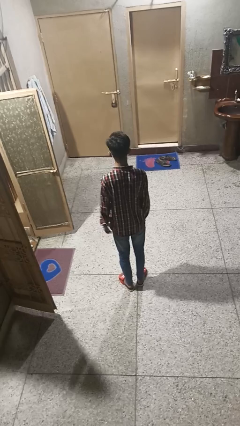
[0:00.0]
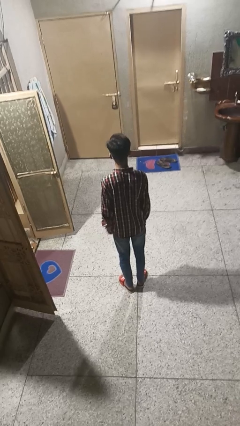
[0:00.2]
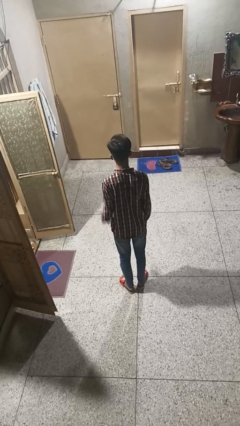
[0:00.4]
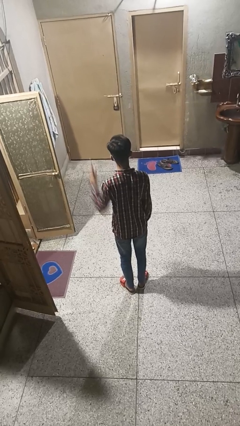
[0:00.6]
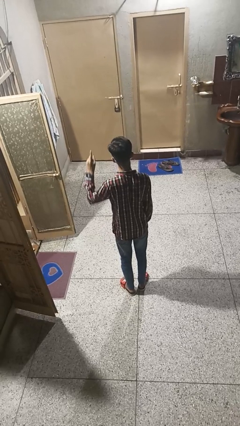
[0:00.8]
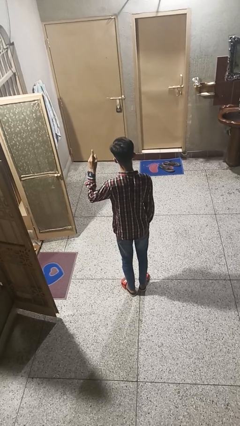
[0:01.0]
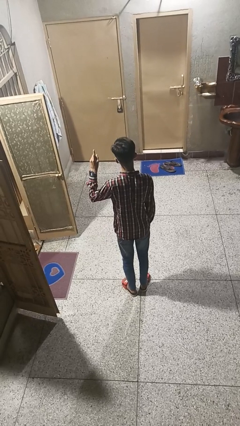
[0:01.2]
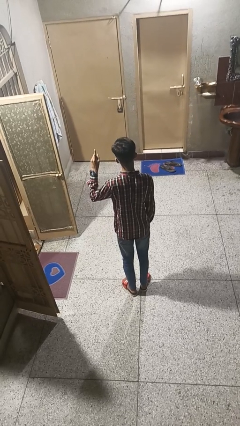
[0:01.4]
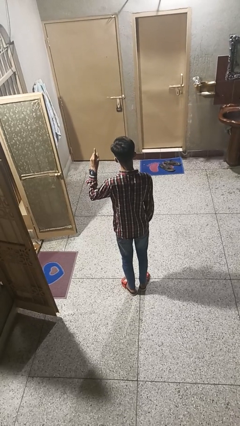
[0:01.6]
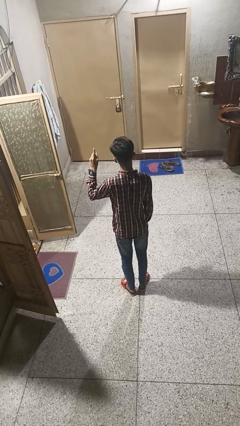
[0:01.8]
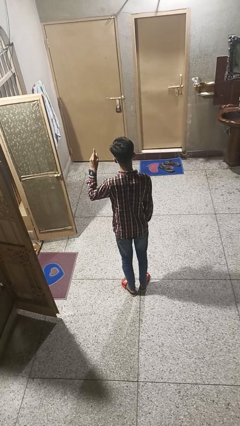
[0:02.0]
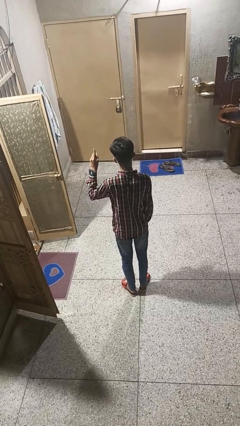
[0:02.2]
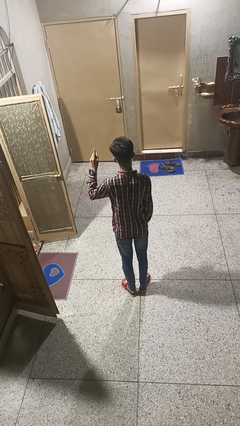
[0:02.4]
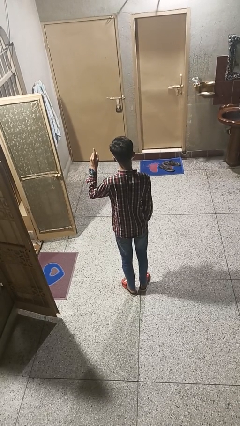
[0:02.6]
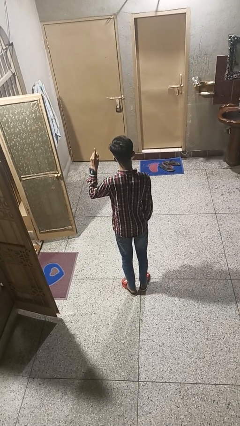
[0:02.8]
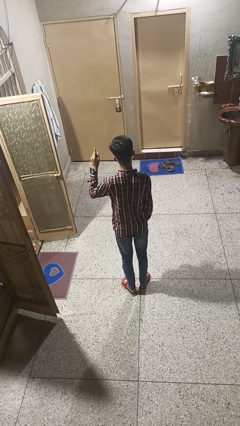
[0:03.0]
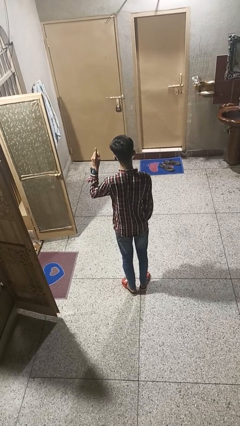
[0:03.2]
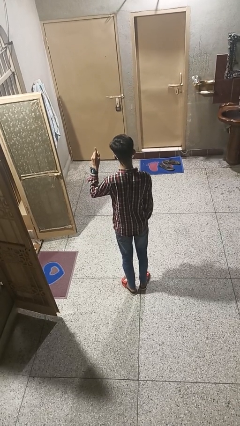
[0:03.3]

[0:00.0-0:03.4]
person gestures number one

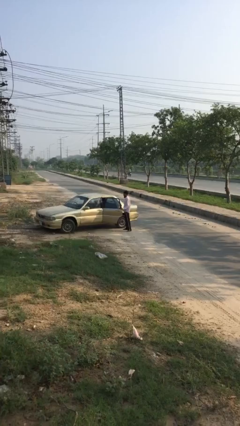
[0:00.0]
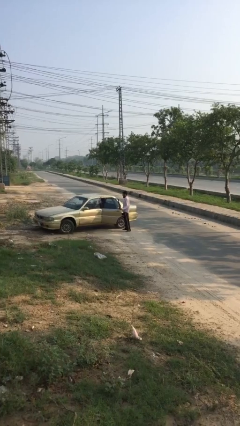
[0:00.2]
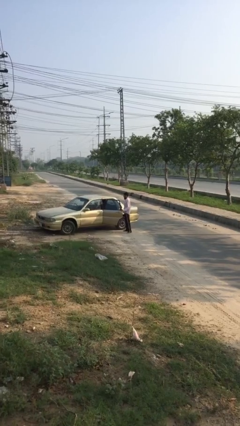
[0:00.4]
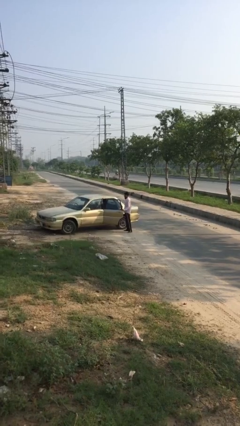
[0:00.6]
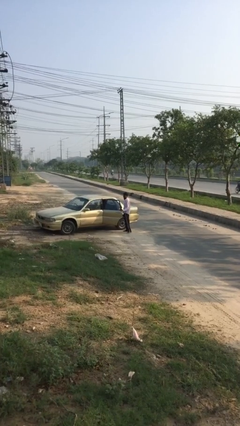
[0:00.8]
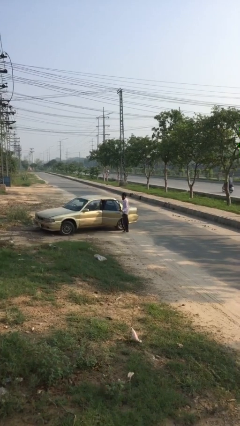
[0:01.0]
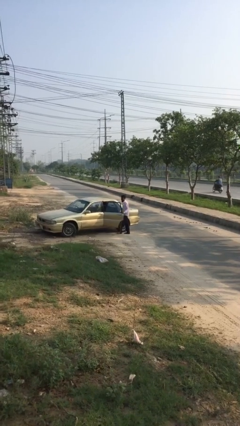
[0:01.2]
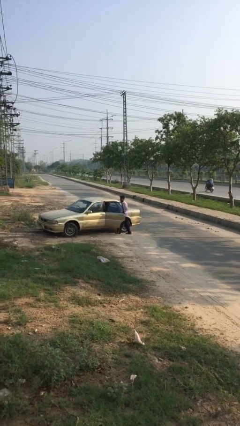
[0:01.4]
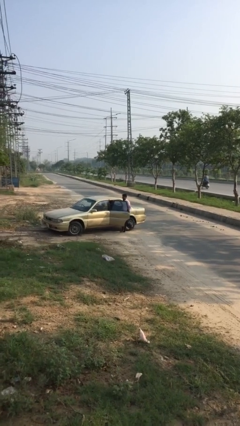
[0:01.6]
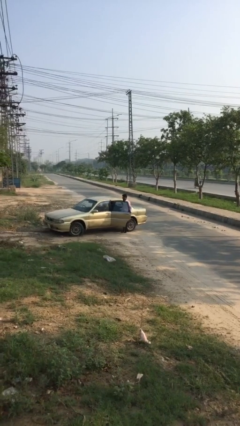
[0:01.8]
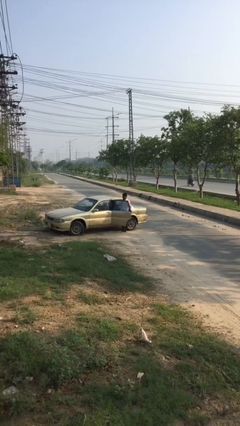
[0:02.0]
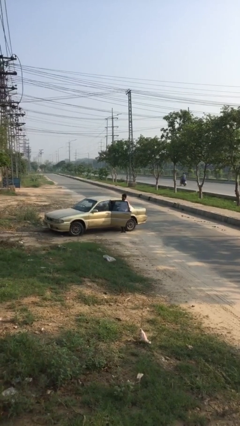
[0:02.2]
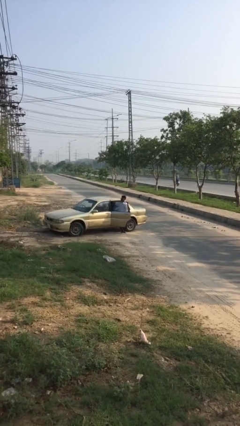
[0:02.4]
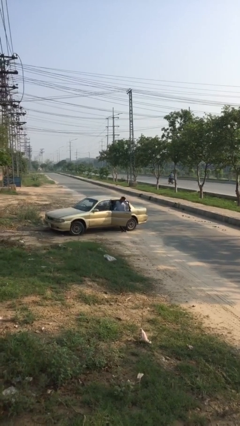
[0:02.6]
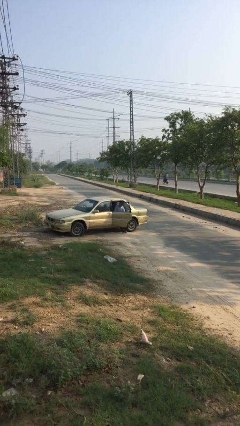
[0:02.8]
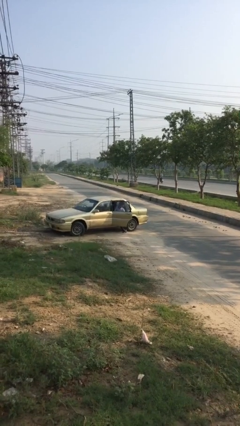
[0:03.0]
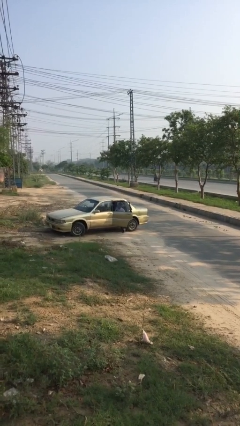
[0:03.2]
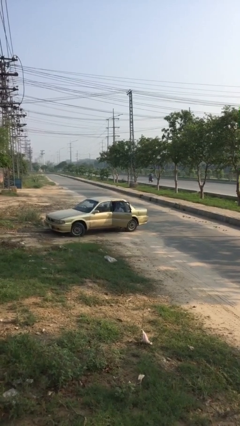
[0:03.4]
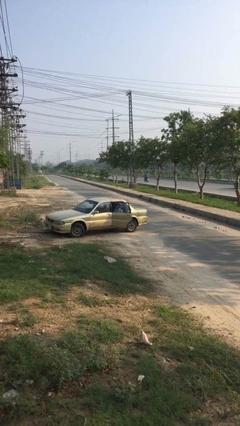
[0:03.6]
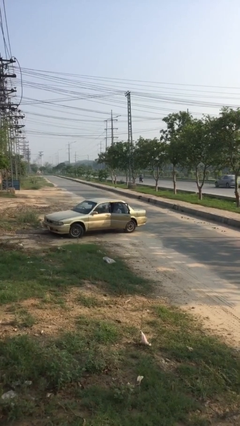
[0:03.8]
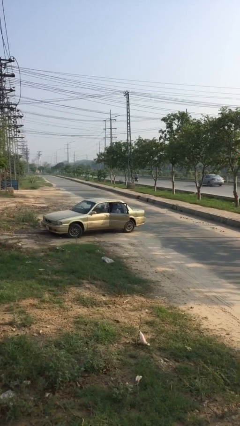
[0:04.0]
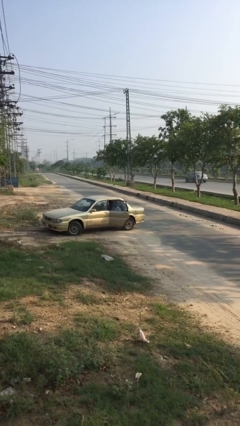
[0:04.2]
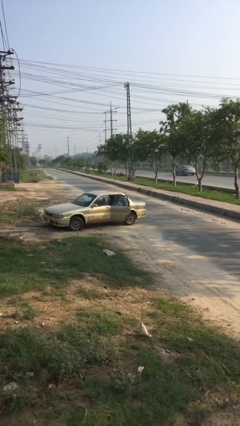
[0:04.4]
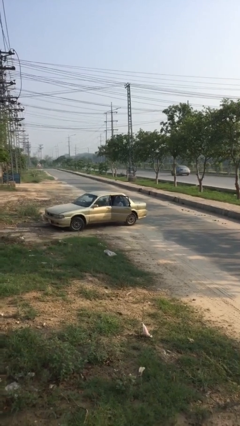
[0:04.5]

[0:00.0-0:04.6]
person enters car

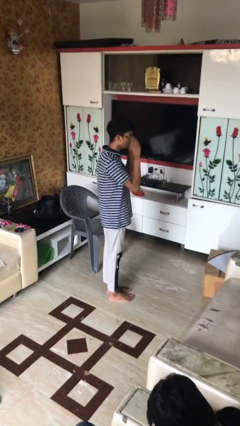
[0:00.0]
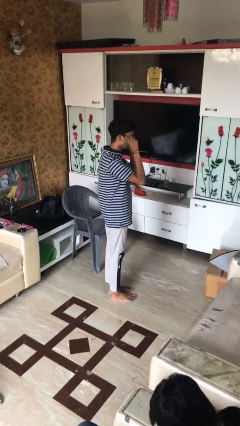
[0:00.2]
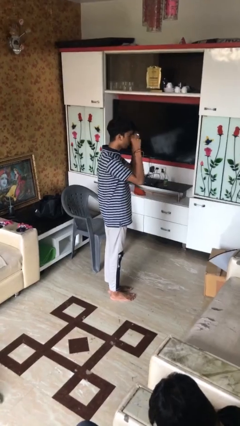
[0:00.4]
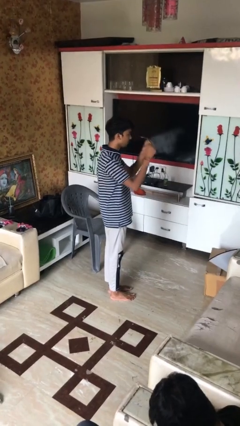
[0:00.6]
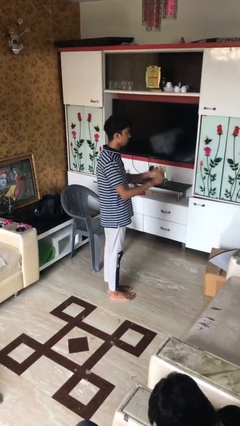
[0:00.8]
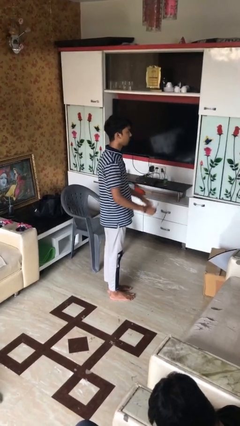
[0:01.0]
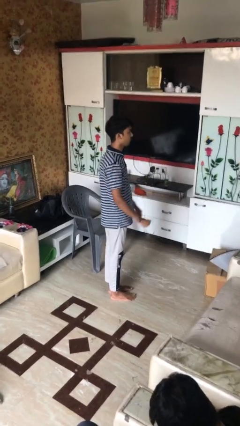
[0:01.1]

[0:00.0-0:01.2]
person takes off glasses

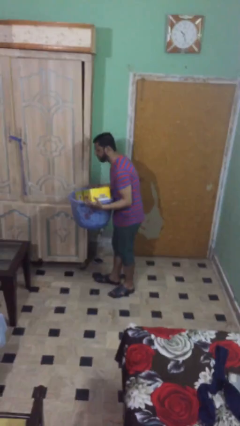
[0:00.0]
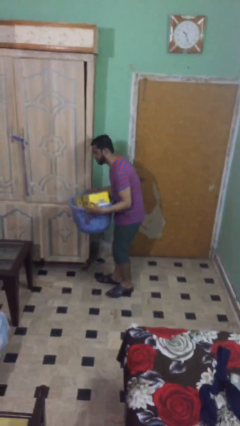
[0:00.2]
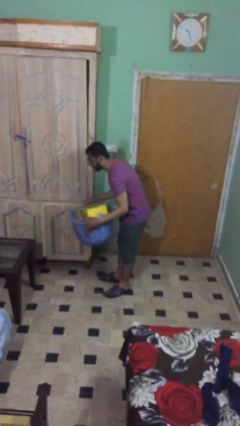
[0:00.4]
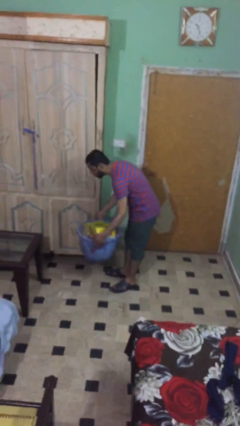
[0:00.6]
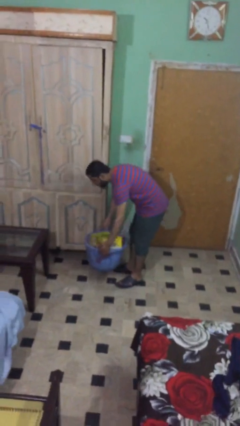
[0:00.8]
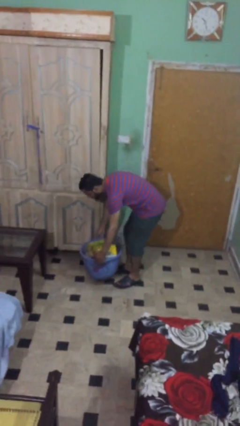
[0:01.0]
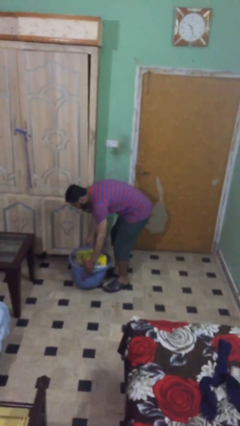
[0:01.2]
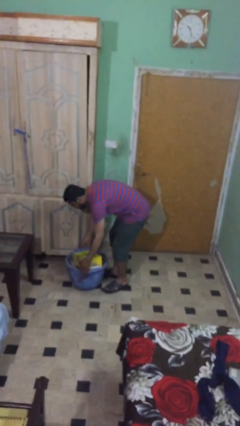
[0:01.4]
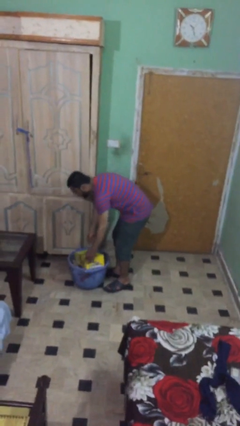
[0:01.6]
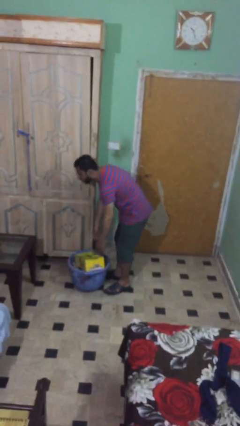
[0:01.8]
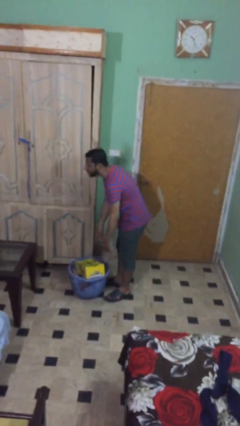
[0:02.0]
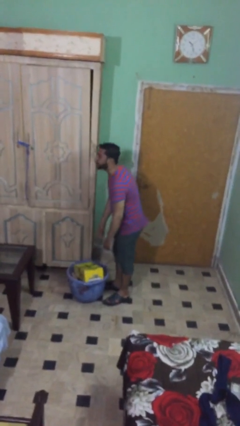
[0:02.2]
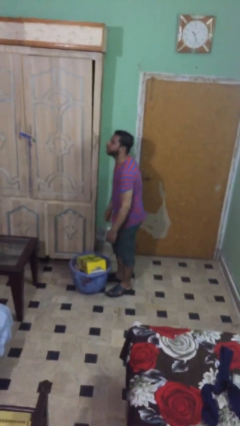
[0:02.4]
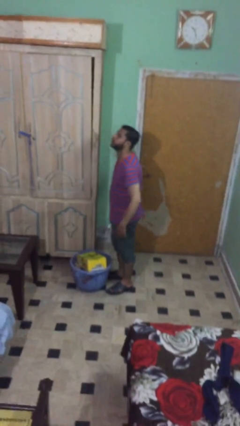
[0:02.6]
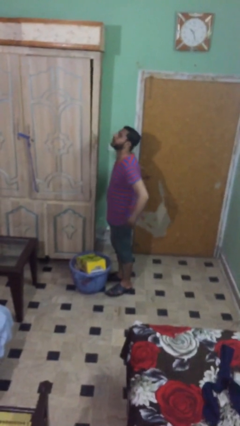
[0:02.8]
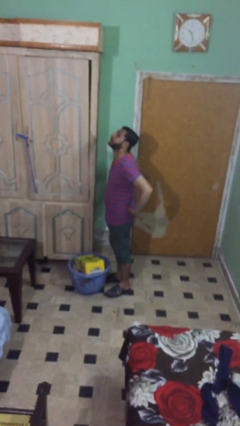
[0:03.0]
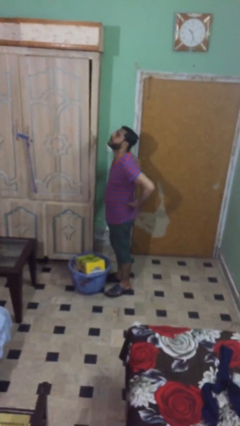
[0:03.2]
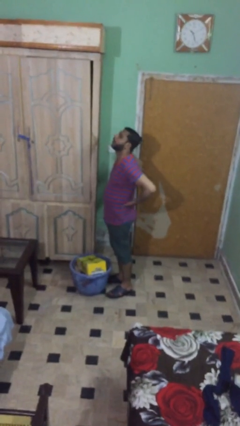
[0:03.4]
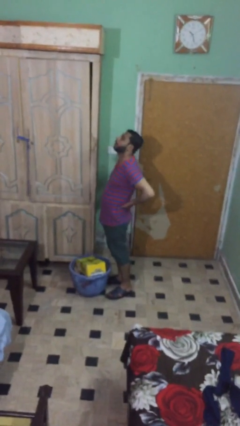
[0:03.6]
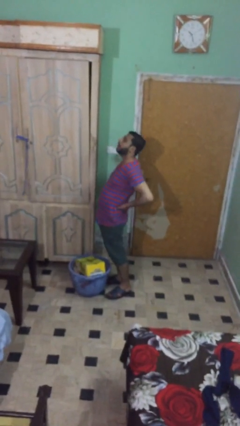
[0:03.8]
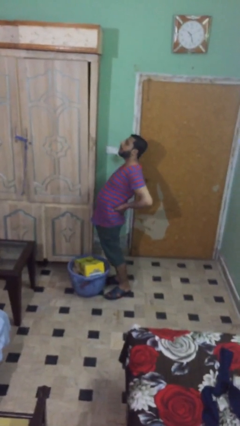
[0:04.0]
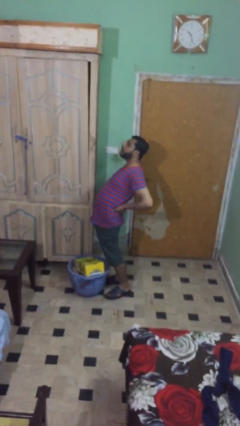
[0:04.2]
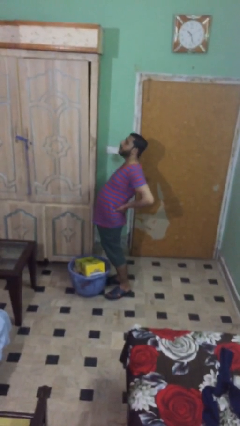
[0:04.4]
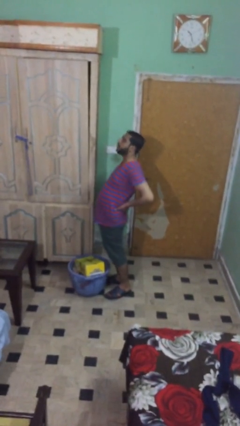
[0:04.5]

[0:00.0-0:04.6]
person puts down object on floor

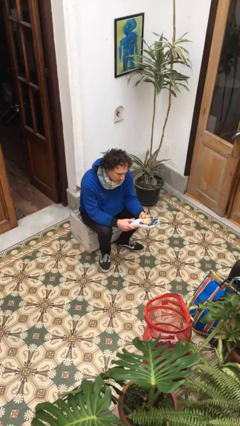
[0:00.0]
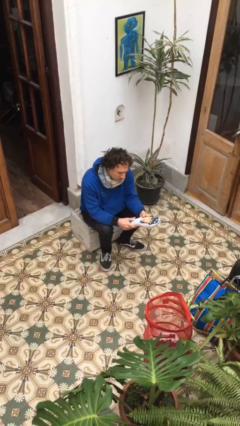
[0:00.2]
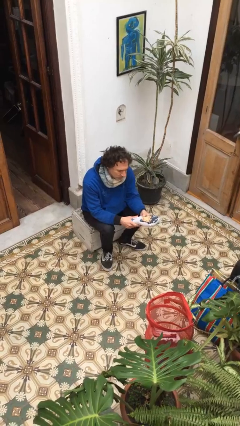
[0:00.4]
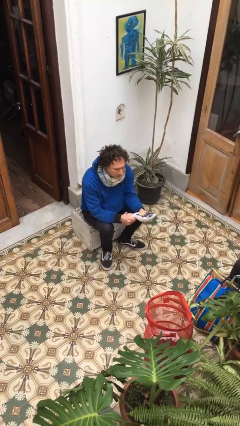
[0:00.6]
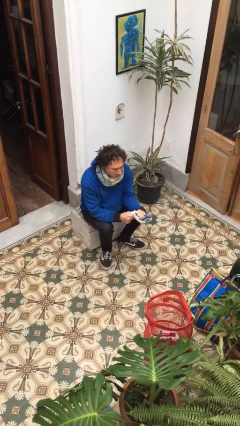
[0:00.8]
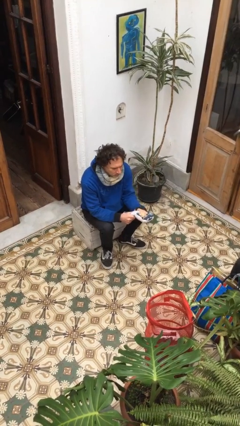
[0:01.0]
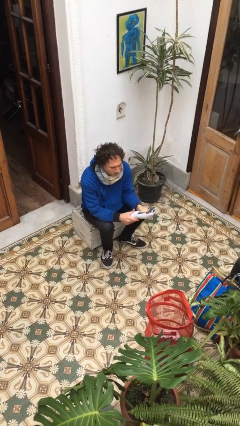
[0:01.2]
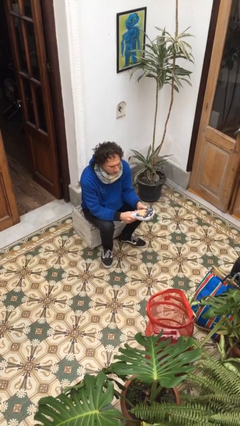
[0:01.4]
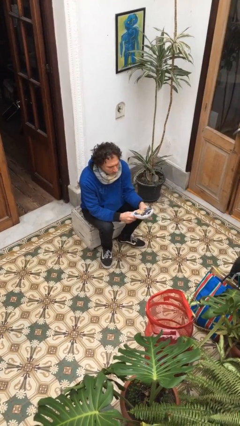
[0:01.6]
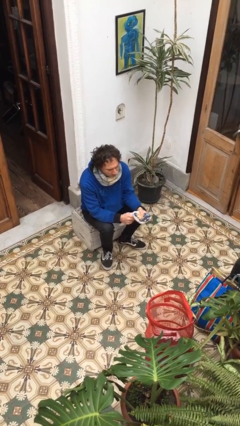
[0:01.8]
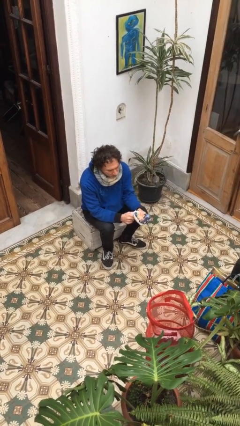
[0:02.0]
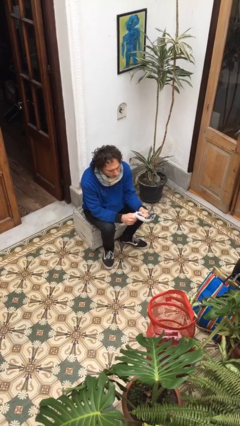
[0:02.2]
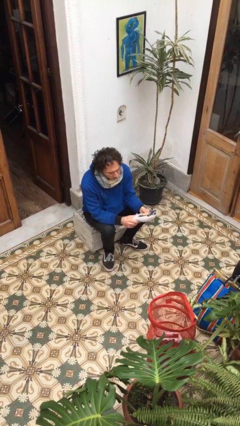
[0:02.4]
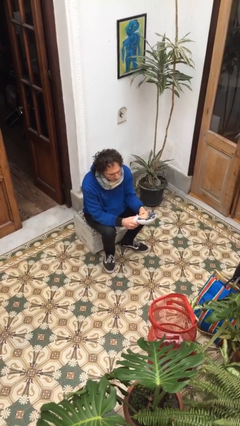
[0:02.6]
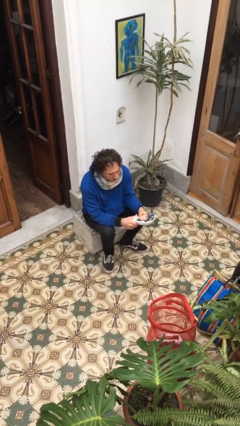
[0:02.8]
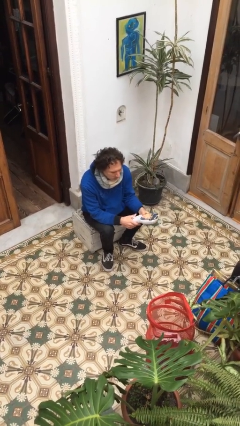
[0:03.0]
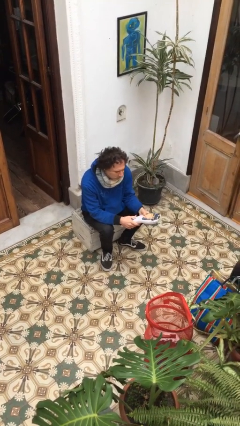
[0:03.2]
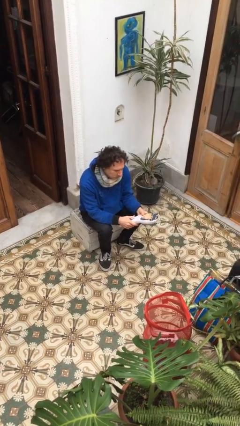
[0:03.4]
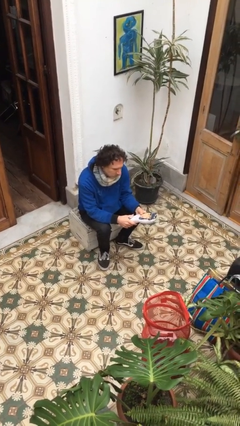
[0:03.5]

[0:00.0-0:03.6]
person squeezes object

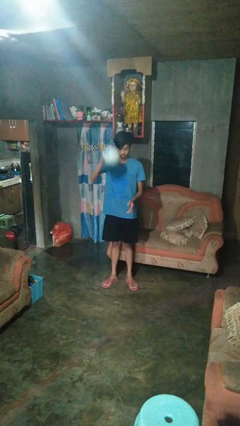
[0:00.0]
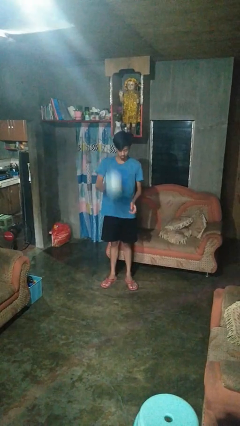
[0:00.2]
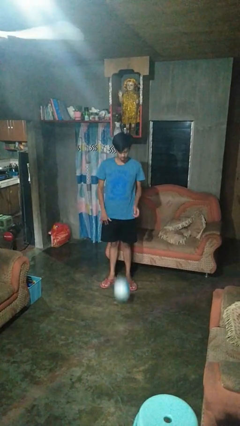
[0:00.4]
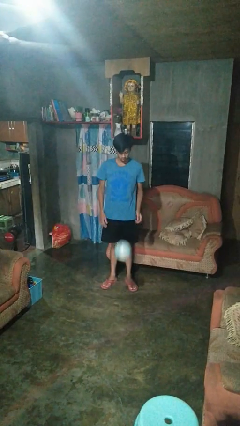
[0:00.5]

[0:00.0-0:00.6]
person bounces ball on floor
